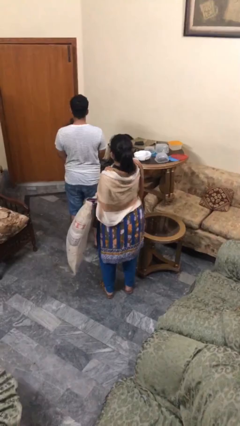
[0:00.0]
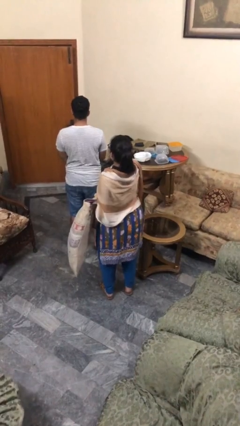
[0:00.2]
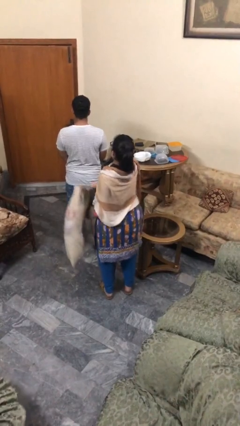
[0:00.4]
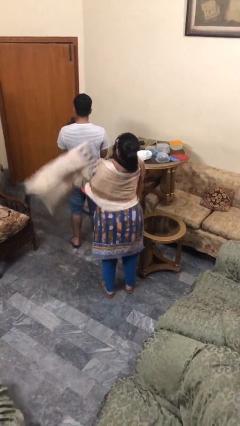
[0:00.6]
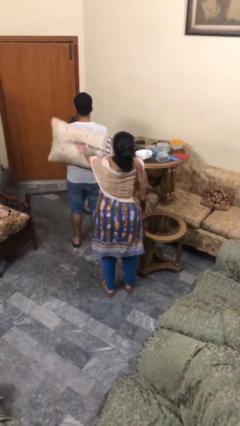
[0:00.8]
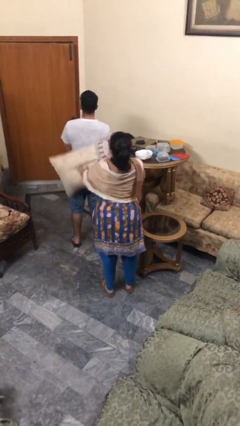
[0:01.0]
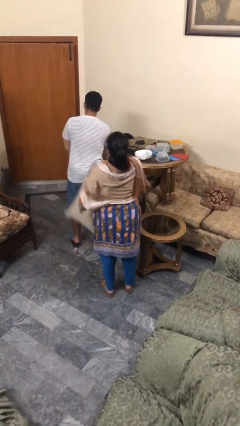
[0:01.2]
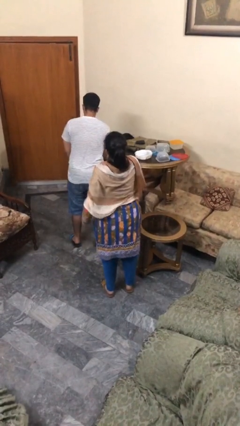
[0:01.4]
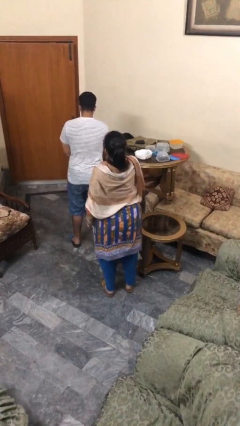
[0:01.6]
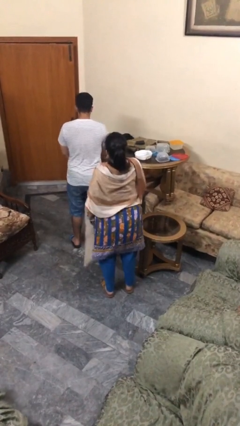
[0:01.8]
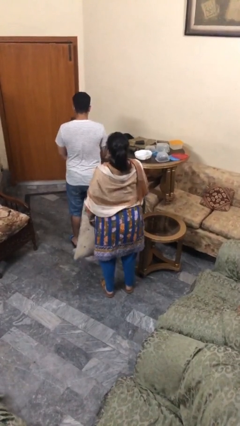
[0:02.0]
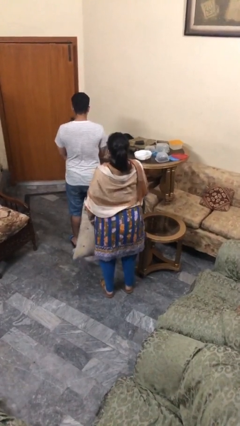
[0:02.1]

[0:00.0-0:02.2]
person hits person with pillow

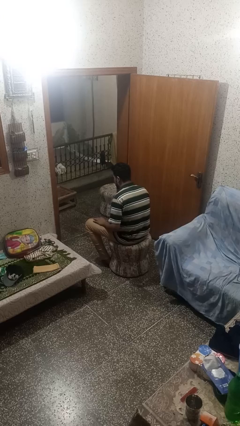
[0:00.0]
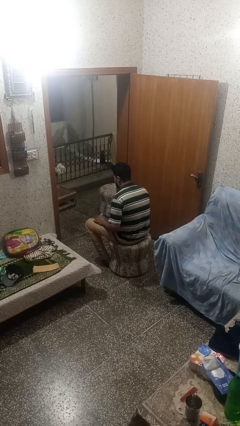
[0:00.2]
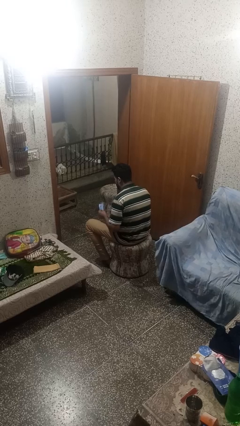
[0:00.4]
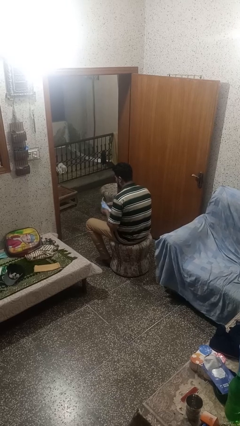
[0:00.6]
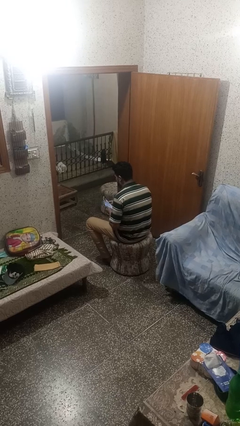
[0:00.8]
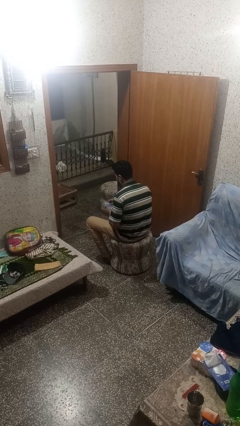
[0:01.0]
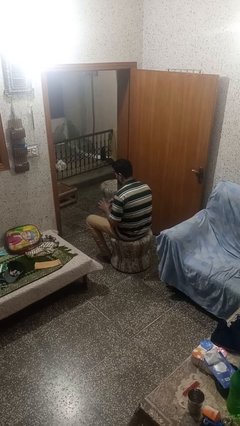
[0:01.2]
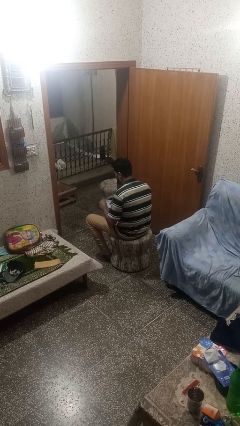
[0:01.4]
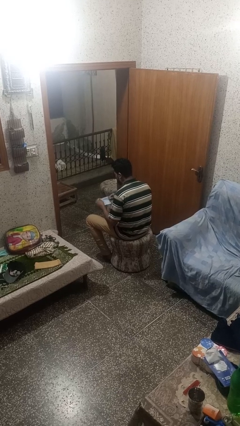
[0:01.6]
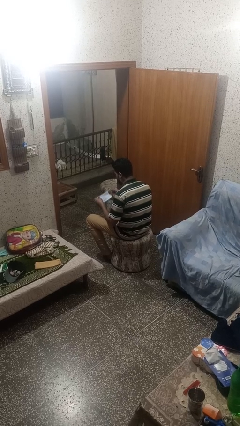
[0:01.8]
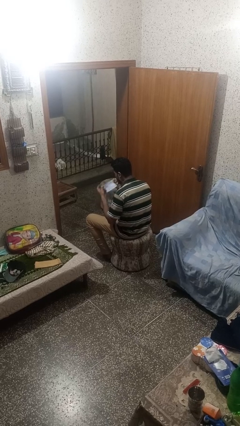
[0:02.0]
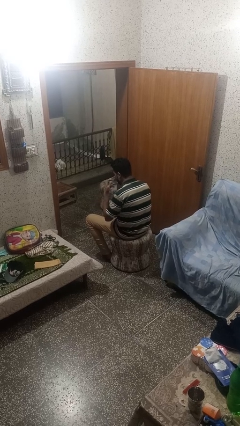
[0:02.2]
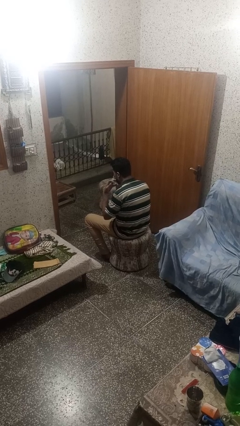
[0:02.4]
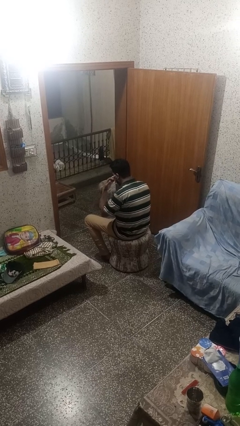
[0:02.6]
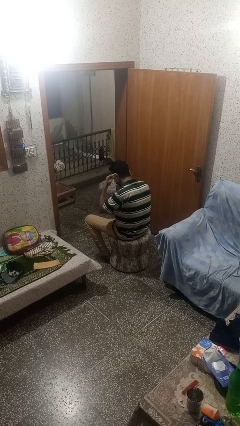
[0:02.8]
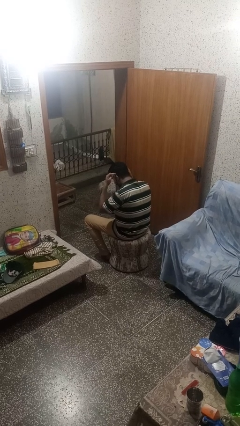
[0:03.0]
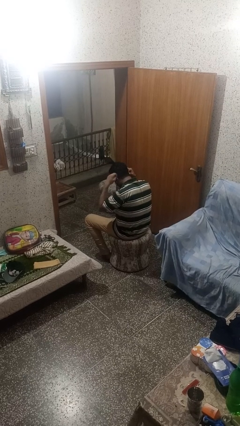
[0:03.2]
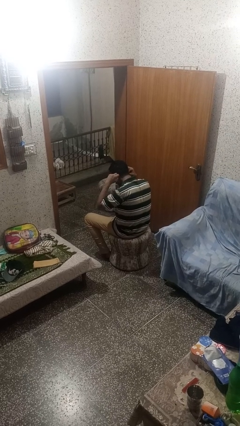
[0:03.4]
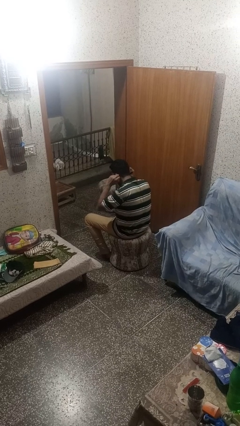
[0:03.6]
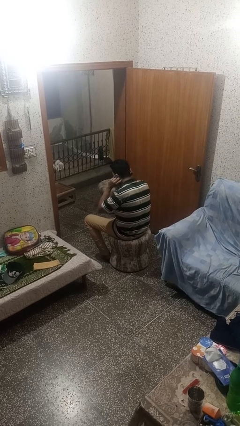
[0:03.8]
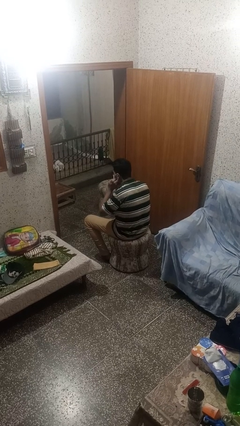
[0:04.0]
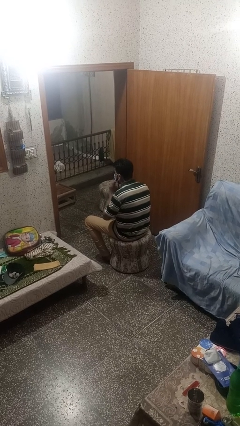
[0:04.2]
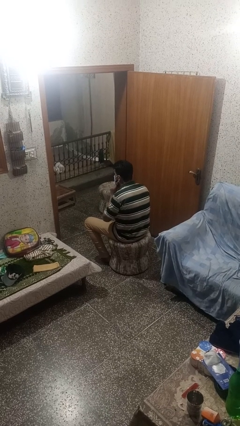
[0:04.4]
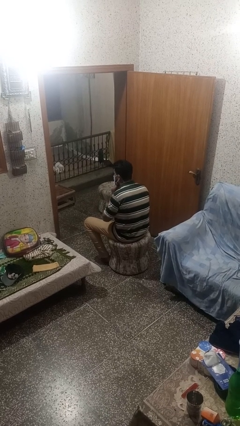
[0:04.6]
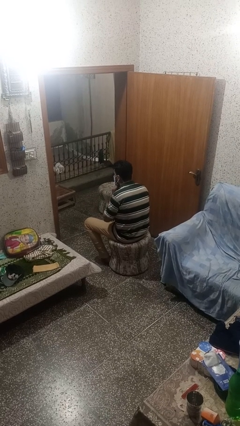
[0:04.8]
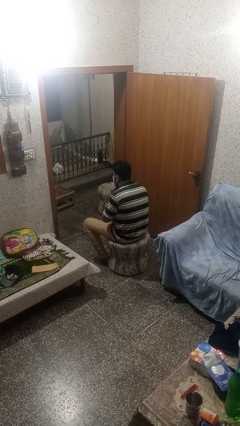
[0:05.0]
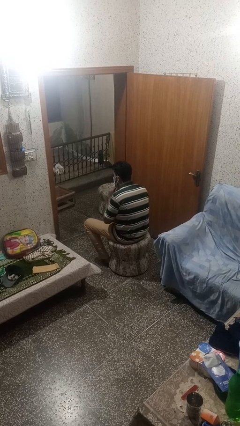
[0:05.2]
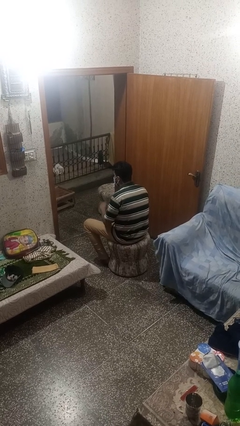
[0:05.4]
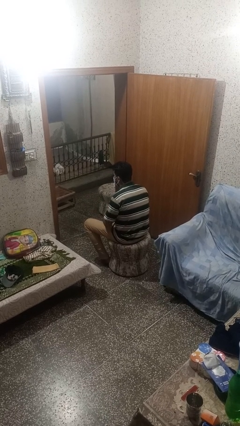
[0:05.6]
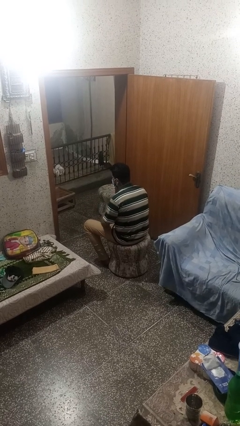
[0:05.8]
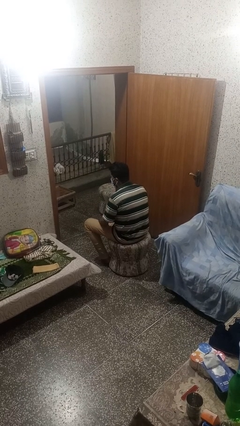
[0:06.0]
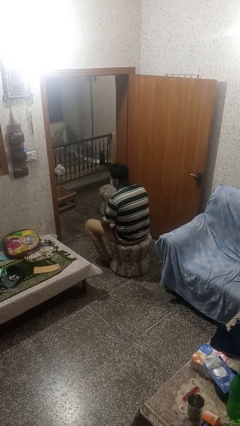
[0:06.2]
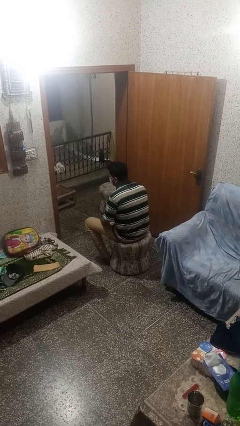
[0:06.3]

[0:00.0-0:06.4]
person puts on facemask

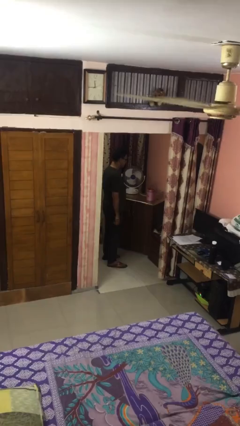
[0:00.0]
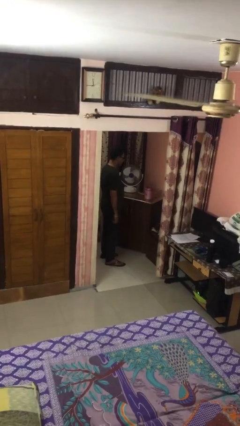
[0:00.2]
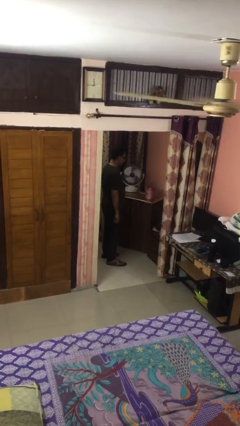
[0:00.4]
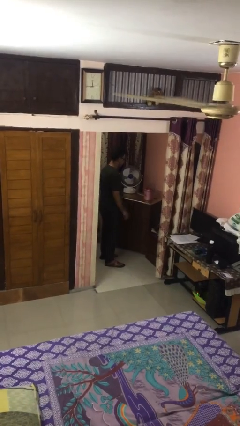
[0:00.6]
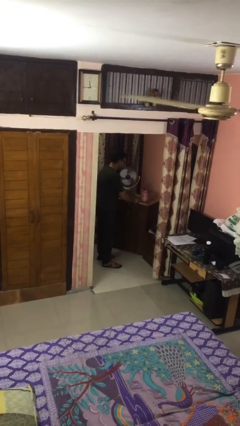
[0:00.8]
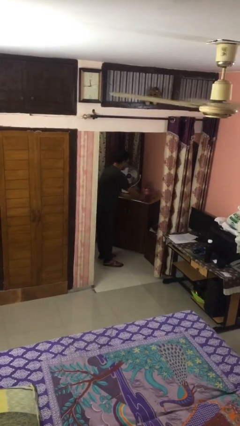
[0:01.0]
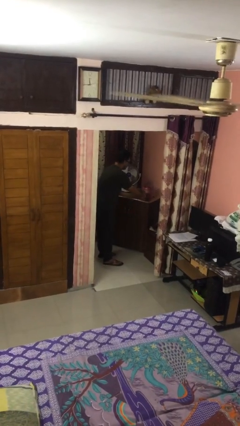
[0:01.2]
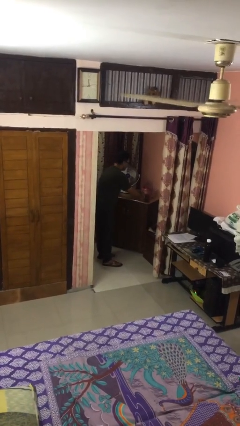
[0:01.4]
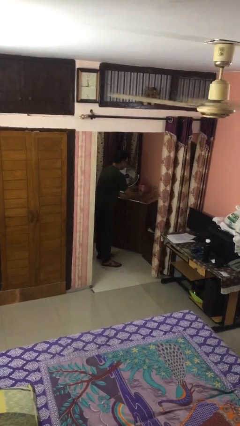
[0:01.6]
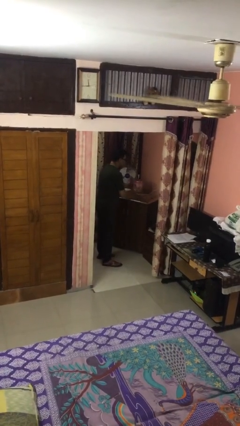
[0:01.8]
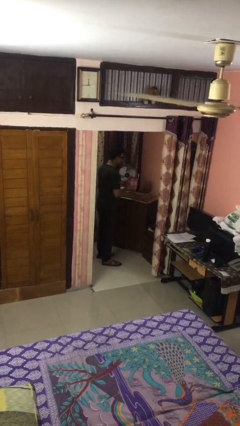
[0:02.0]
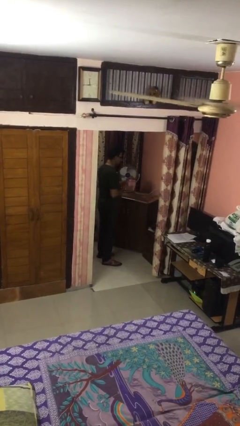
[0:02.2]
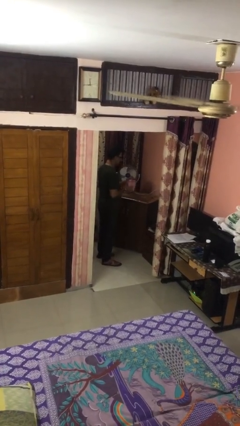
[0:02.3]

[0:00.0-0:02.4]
person picks up object from countertop

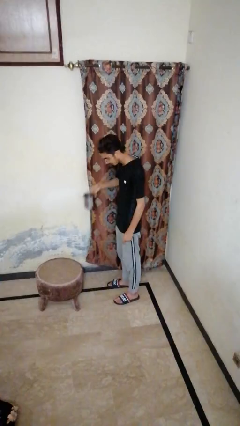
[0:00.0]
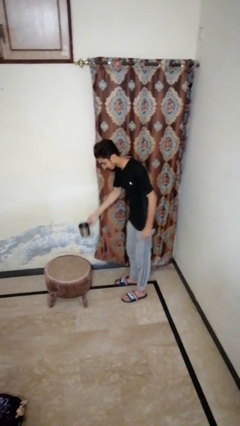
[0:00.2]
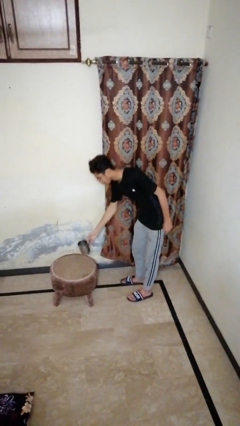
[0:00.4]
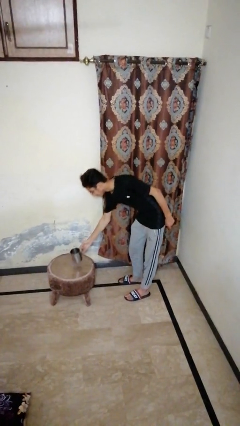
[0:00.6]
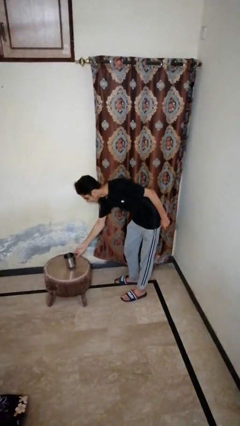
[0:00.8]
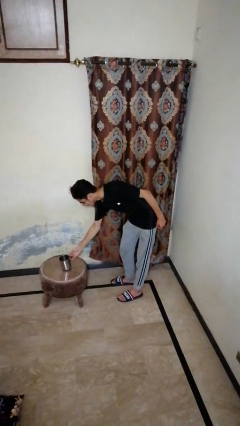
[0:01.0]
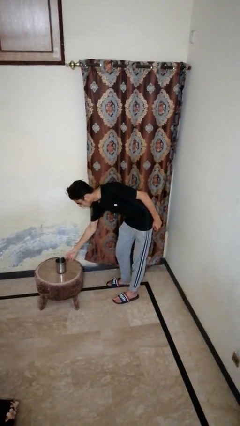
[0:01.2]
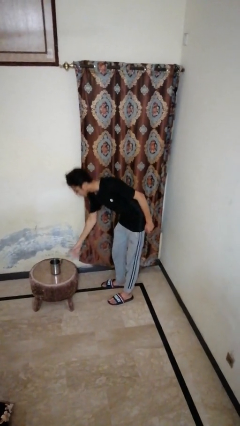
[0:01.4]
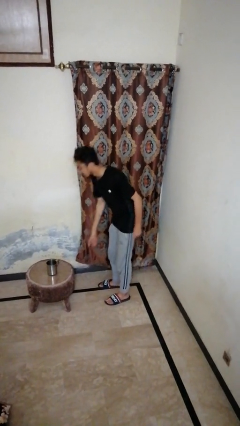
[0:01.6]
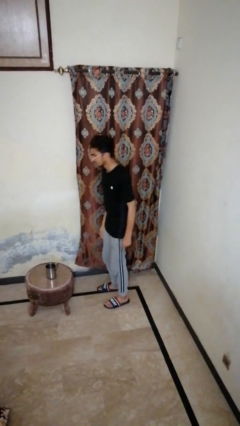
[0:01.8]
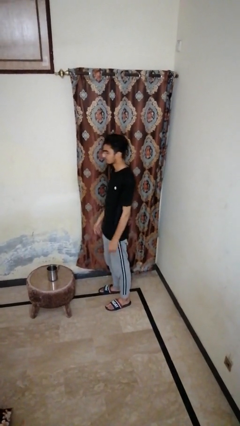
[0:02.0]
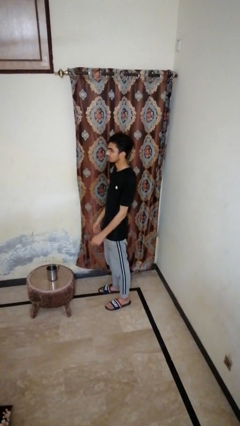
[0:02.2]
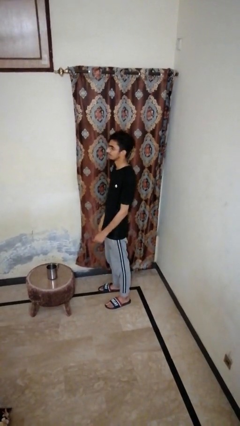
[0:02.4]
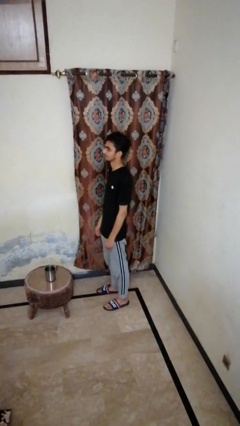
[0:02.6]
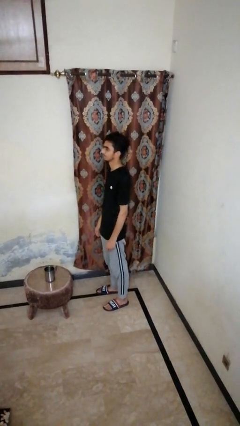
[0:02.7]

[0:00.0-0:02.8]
person puts down object on table

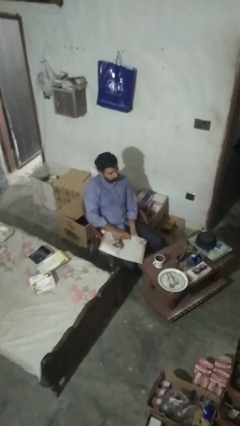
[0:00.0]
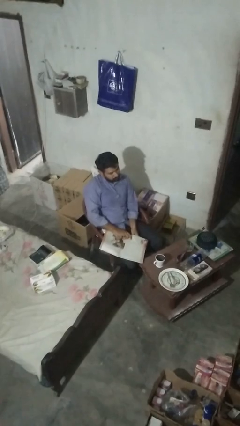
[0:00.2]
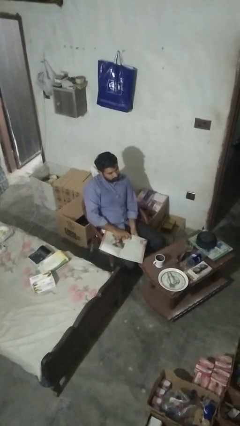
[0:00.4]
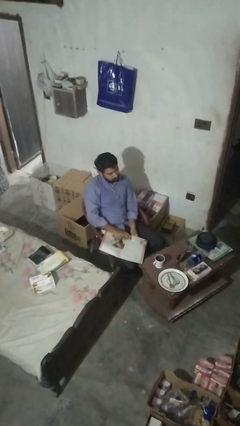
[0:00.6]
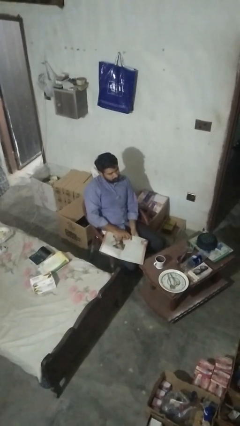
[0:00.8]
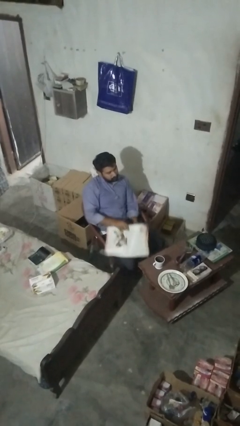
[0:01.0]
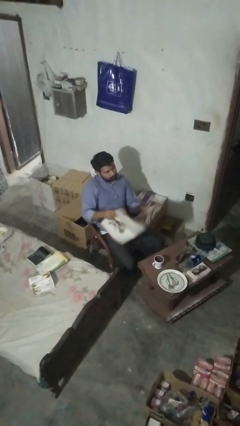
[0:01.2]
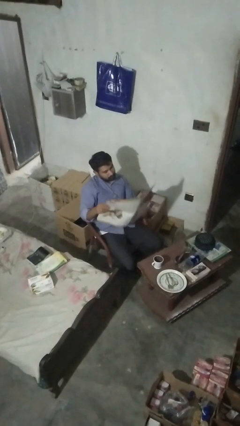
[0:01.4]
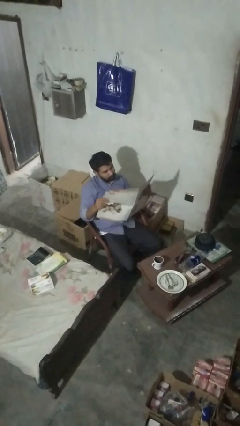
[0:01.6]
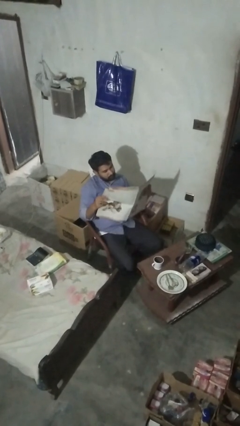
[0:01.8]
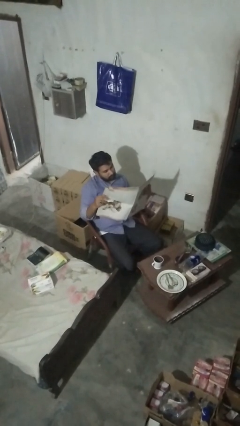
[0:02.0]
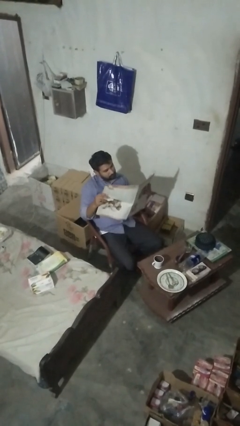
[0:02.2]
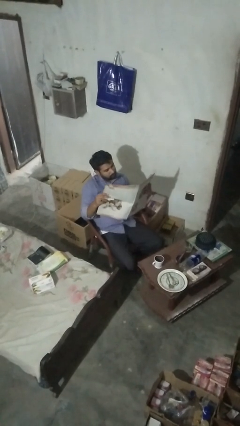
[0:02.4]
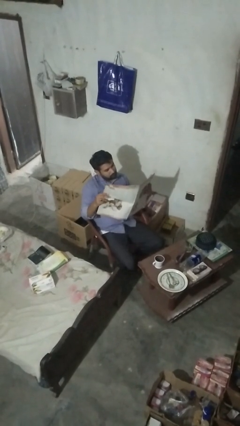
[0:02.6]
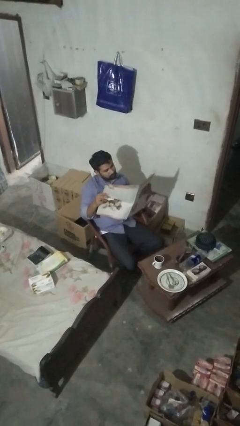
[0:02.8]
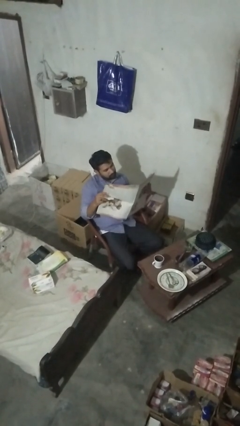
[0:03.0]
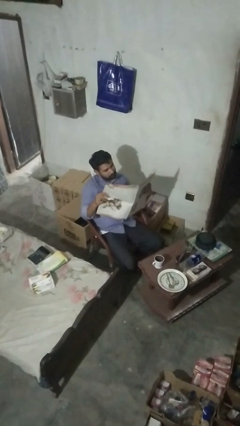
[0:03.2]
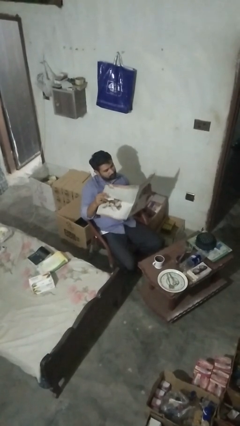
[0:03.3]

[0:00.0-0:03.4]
person reads newspaper
